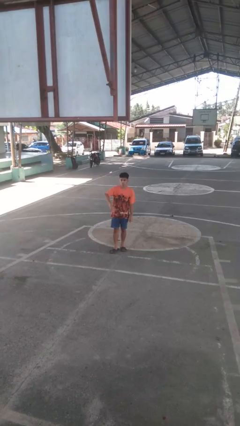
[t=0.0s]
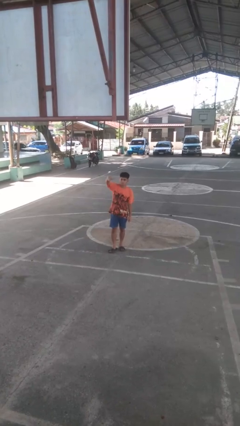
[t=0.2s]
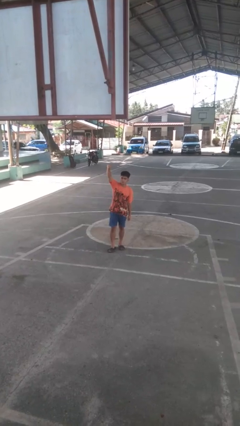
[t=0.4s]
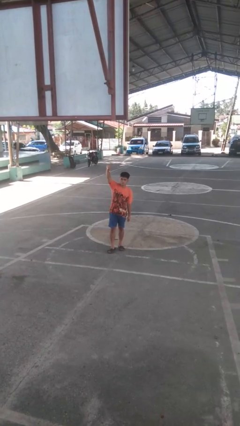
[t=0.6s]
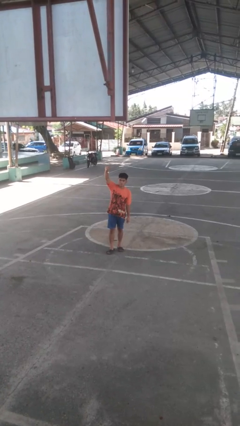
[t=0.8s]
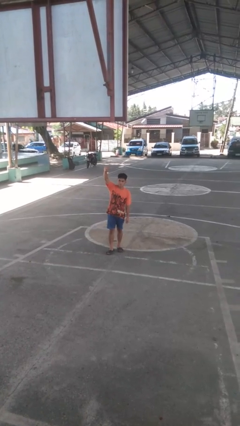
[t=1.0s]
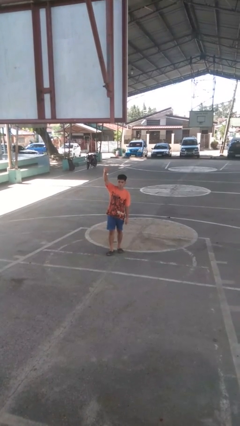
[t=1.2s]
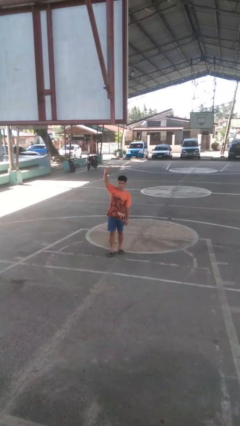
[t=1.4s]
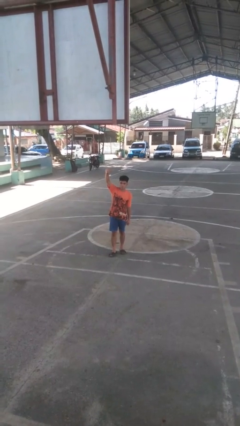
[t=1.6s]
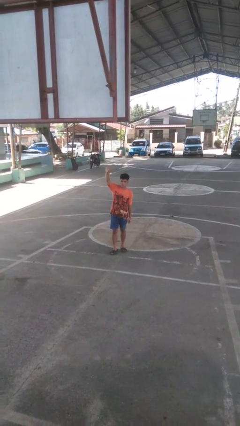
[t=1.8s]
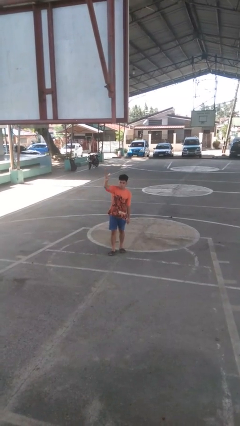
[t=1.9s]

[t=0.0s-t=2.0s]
person gestures swipe up

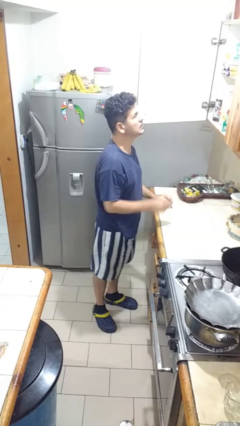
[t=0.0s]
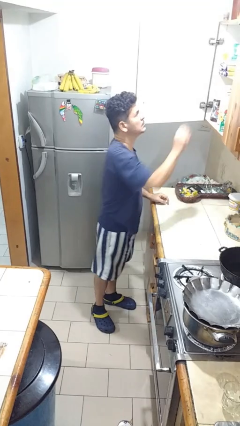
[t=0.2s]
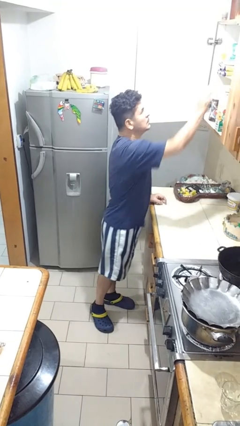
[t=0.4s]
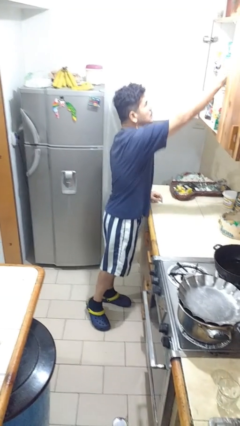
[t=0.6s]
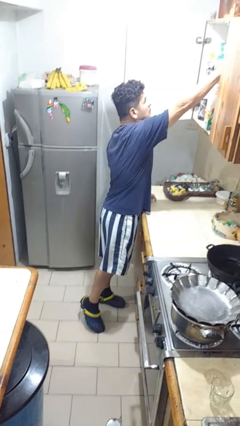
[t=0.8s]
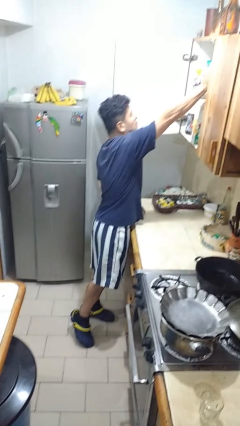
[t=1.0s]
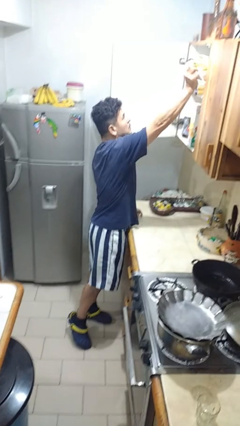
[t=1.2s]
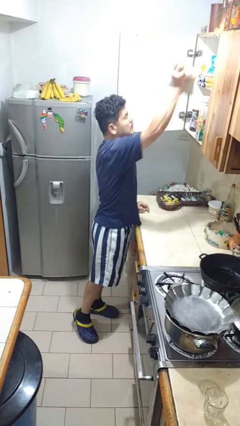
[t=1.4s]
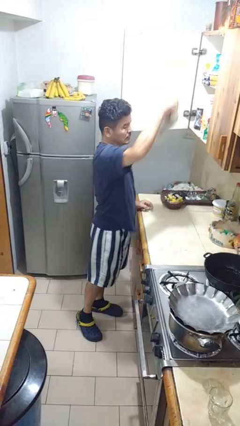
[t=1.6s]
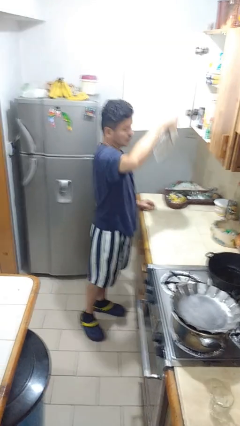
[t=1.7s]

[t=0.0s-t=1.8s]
person takes object from cabinet

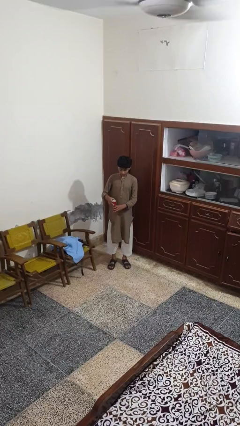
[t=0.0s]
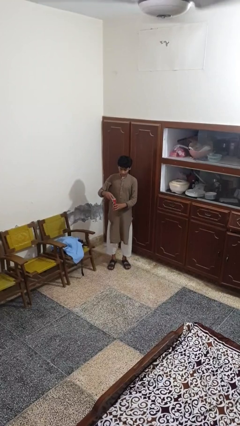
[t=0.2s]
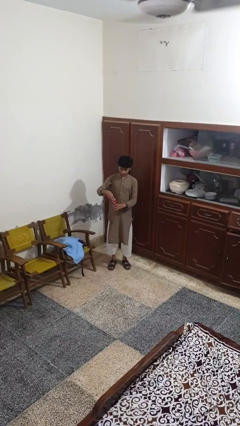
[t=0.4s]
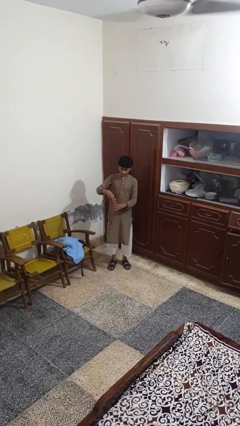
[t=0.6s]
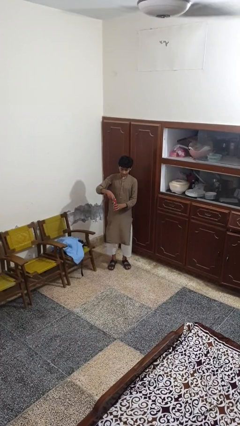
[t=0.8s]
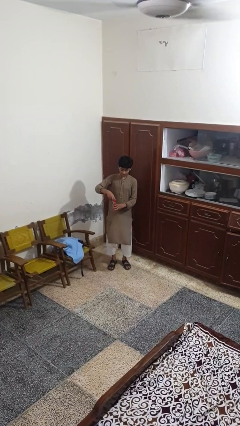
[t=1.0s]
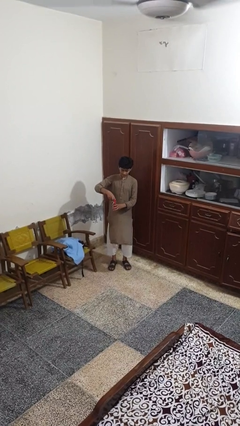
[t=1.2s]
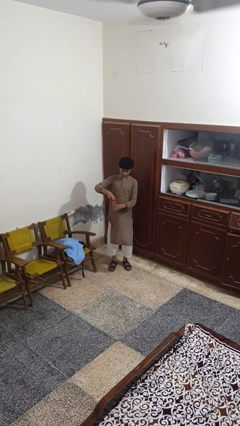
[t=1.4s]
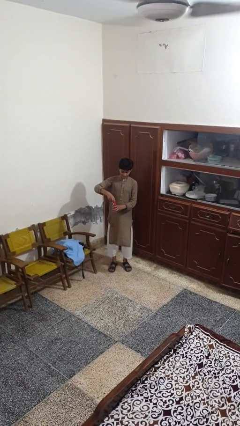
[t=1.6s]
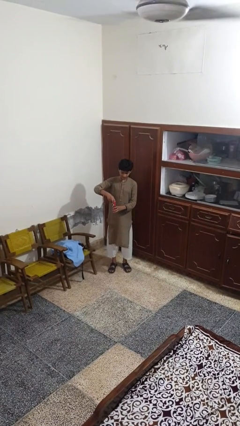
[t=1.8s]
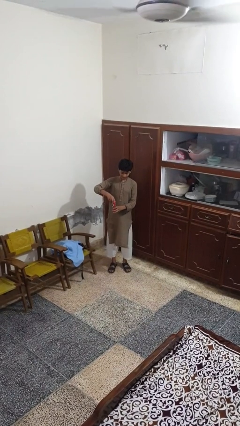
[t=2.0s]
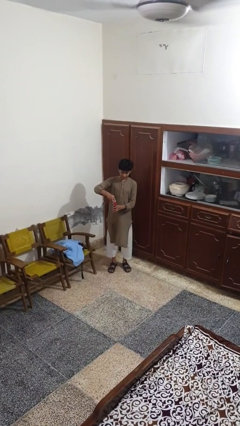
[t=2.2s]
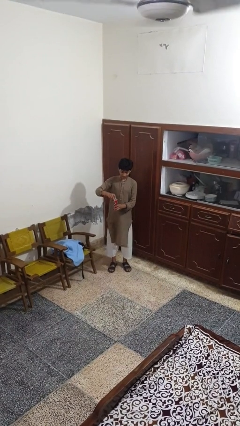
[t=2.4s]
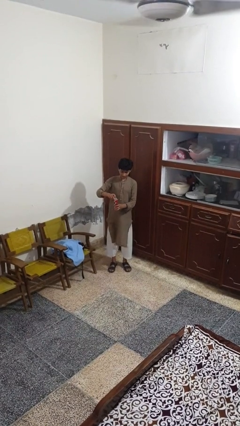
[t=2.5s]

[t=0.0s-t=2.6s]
person opens beverage can

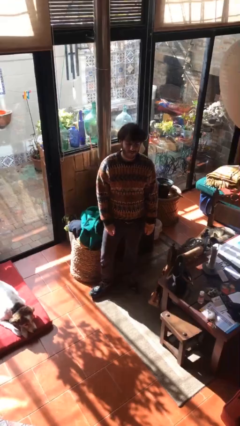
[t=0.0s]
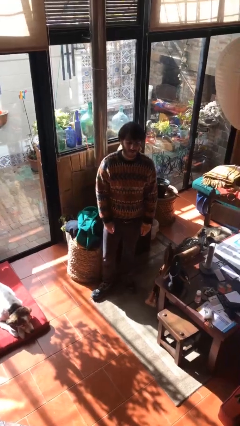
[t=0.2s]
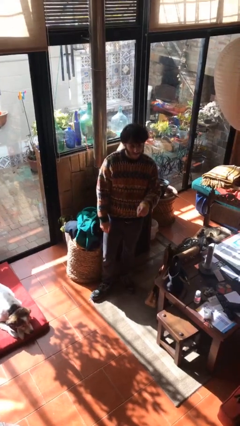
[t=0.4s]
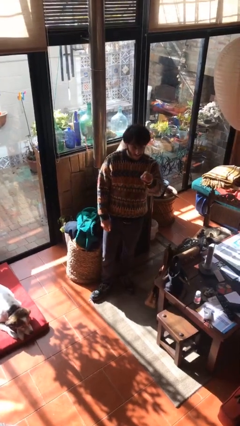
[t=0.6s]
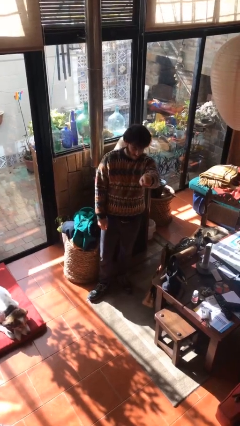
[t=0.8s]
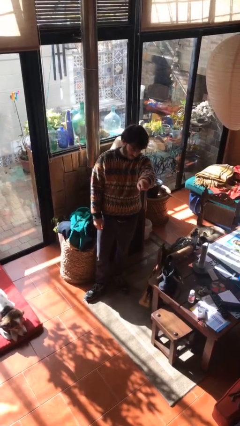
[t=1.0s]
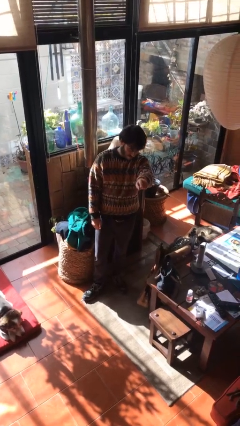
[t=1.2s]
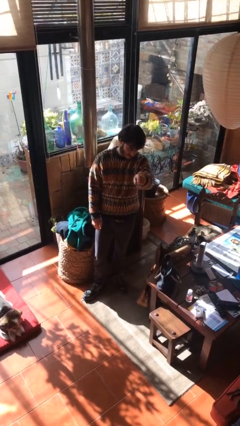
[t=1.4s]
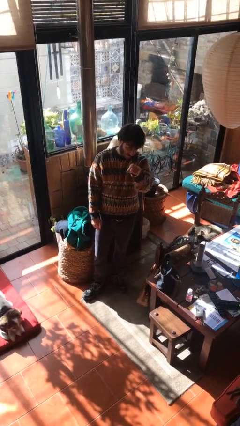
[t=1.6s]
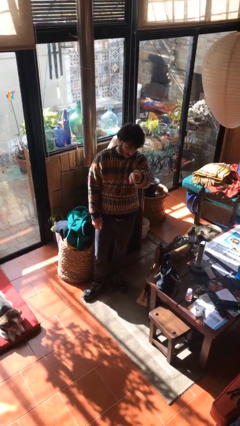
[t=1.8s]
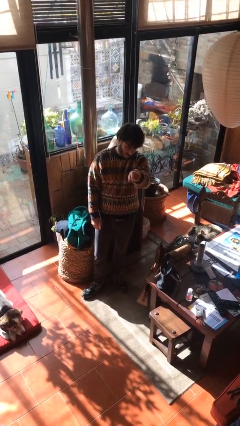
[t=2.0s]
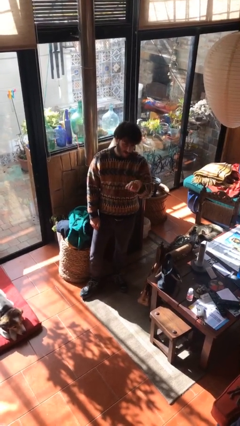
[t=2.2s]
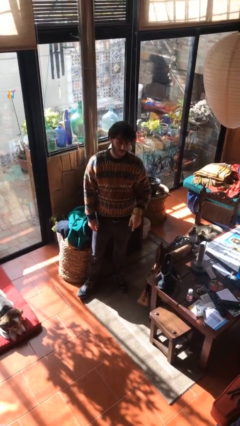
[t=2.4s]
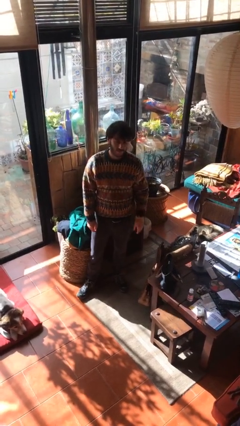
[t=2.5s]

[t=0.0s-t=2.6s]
person points at person

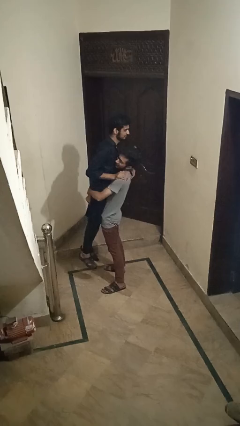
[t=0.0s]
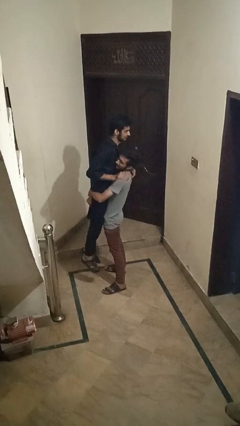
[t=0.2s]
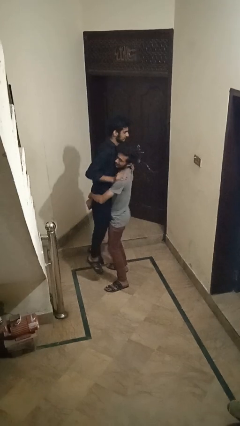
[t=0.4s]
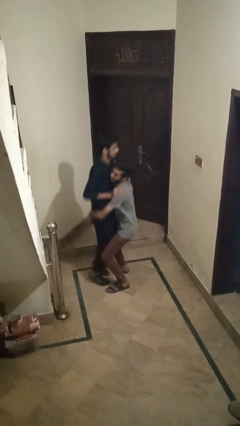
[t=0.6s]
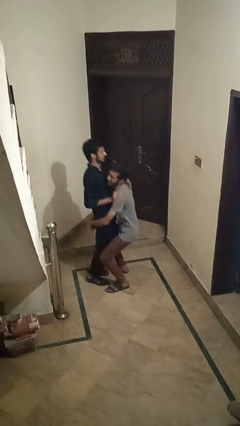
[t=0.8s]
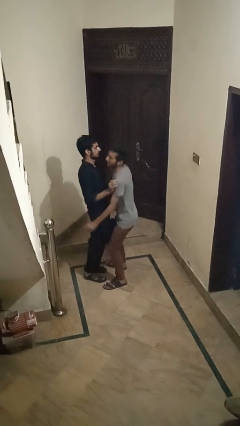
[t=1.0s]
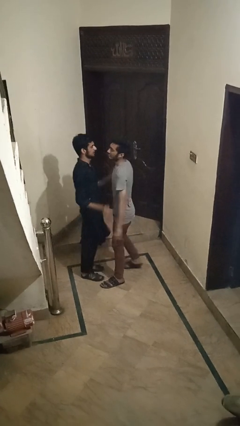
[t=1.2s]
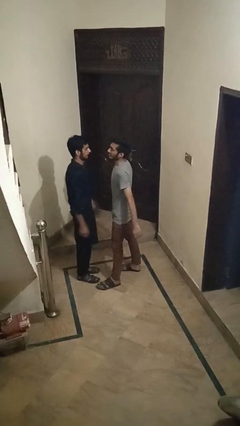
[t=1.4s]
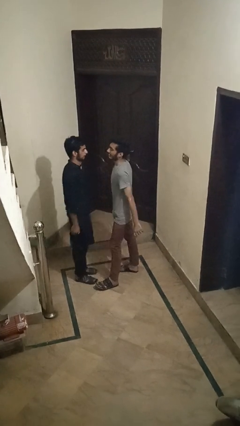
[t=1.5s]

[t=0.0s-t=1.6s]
person puts down person

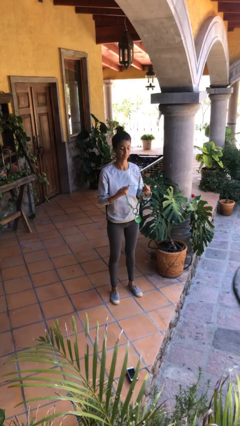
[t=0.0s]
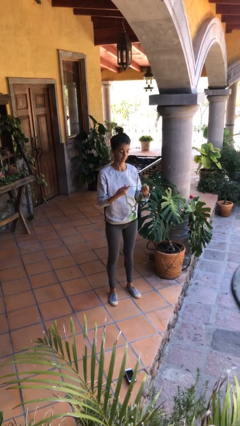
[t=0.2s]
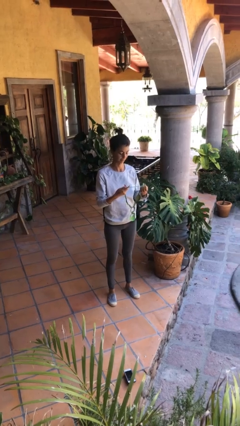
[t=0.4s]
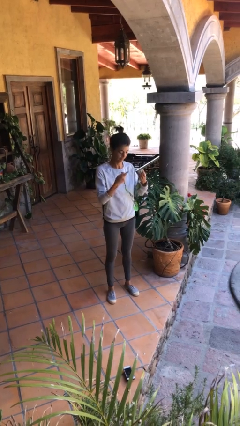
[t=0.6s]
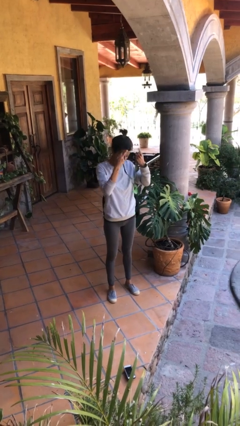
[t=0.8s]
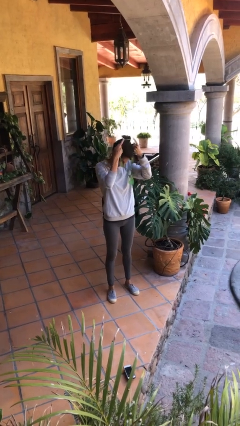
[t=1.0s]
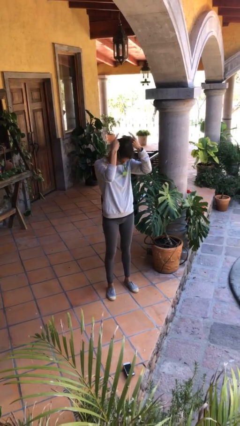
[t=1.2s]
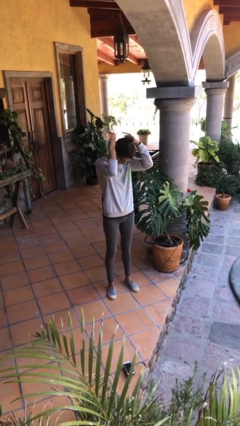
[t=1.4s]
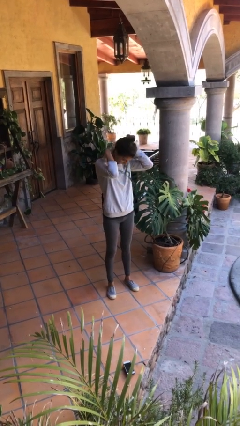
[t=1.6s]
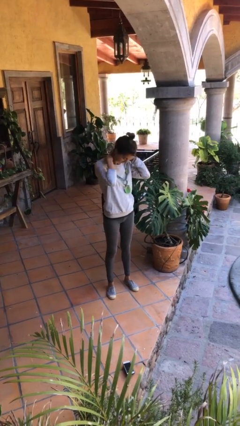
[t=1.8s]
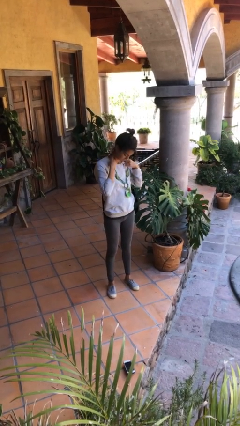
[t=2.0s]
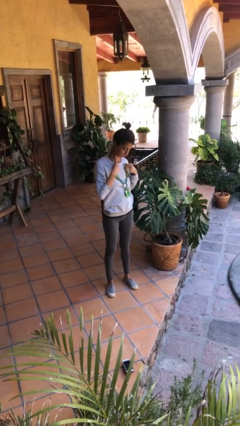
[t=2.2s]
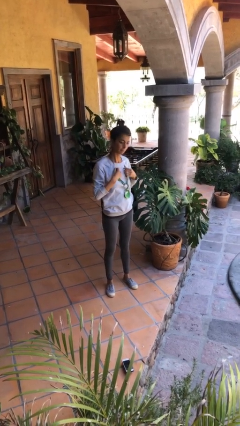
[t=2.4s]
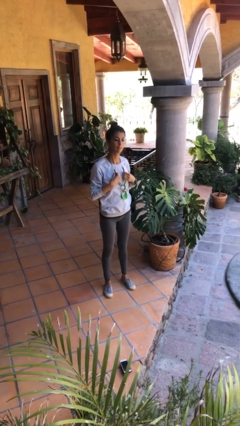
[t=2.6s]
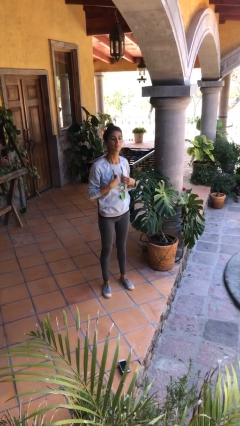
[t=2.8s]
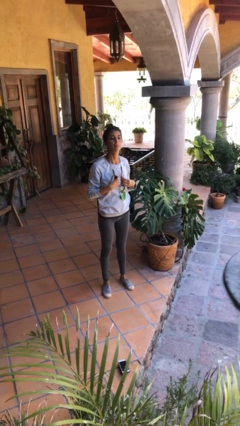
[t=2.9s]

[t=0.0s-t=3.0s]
person puts on necklace

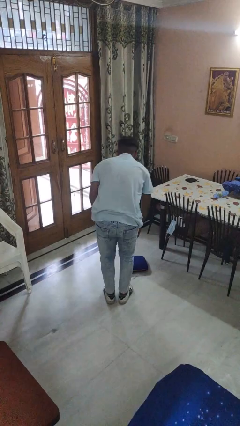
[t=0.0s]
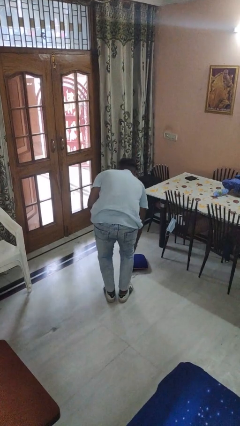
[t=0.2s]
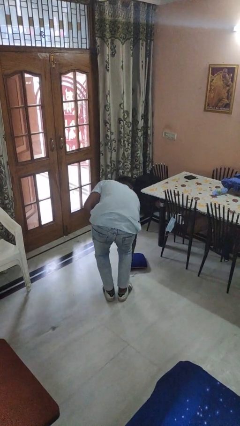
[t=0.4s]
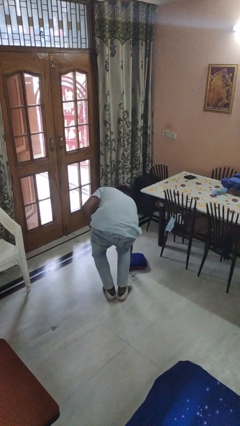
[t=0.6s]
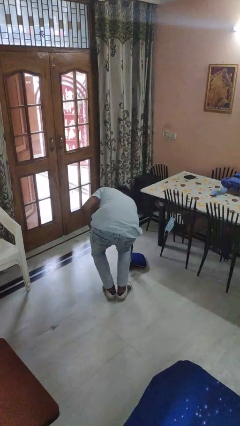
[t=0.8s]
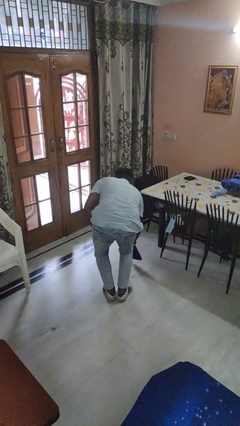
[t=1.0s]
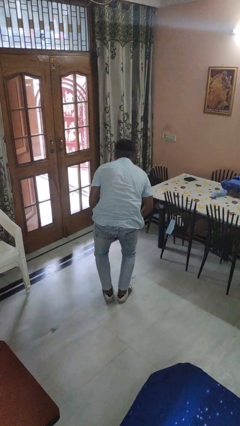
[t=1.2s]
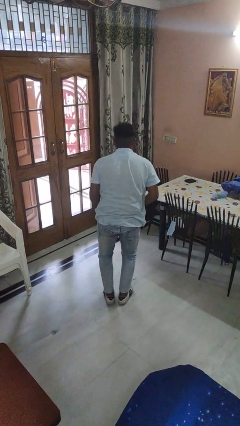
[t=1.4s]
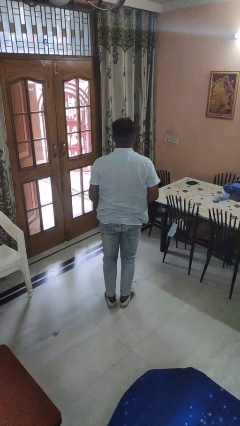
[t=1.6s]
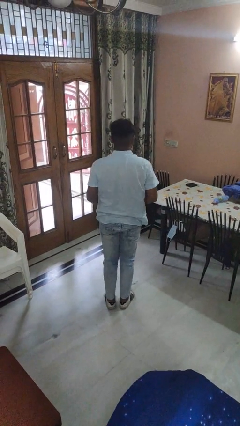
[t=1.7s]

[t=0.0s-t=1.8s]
person picks up object from floor

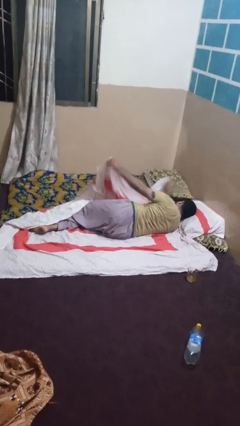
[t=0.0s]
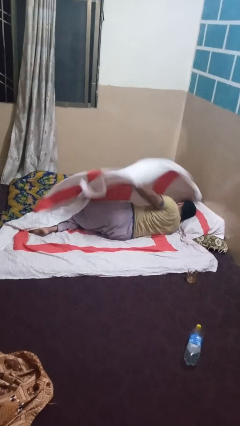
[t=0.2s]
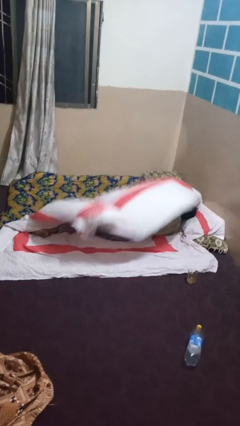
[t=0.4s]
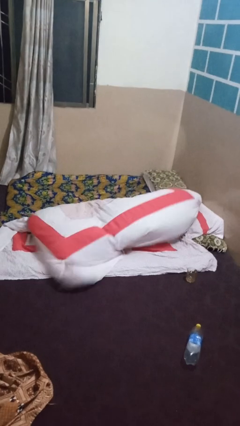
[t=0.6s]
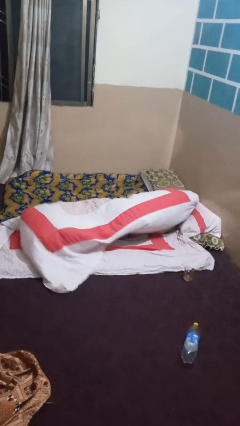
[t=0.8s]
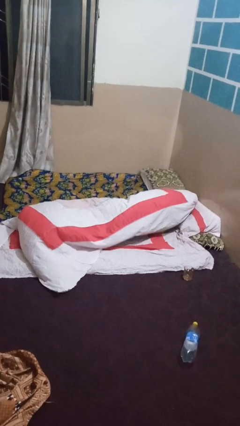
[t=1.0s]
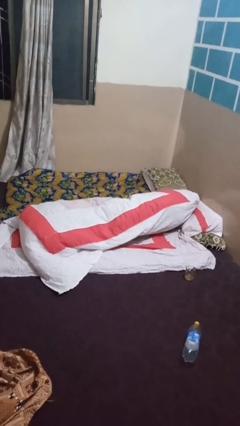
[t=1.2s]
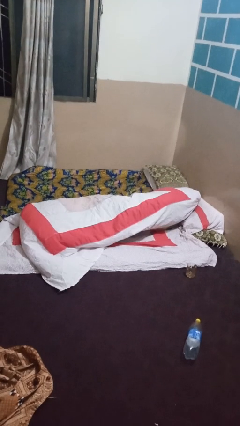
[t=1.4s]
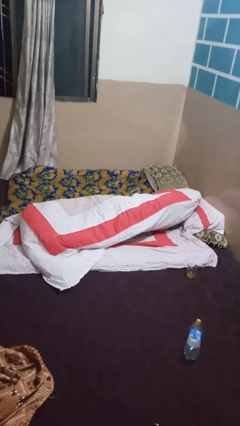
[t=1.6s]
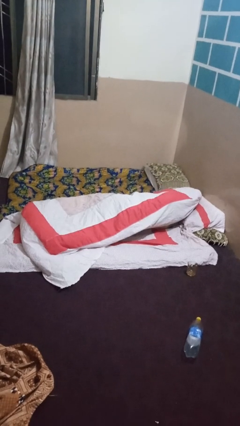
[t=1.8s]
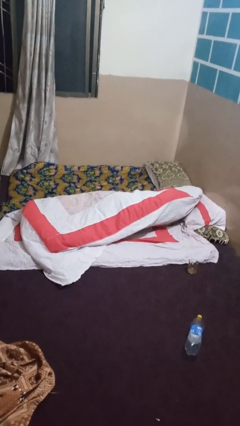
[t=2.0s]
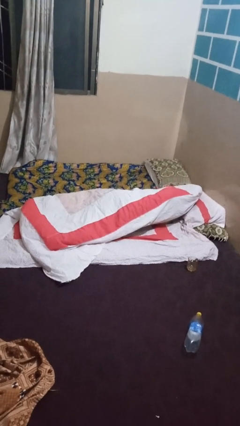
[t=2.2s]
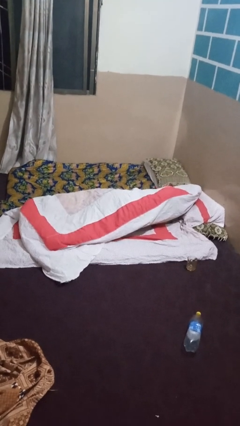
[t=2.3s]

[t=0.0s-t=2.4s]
person covers with bedsheets
